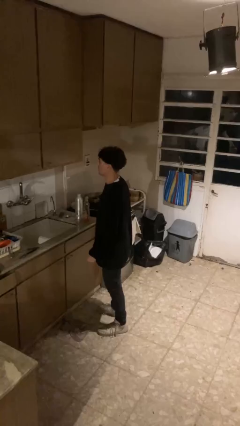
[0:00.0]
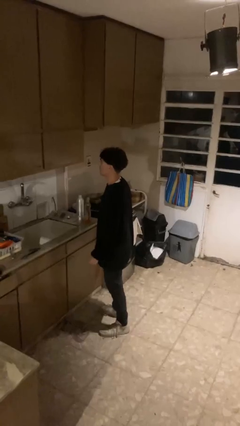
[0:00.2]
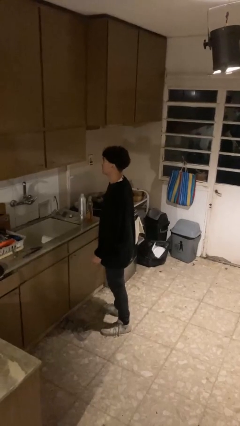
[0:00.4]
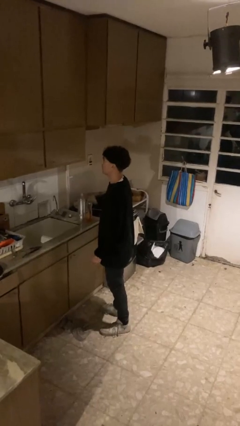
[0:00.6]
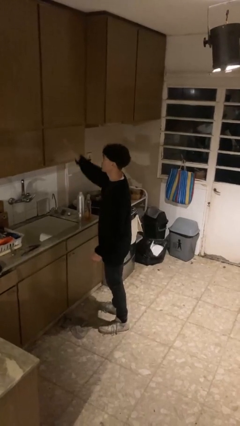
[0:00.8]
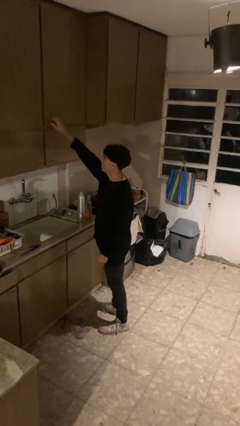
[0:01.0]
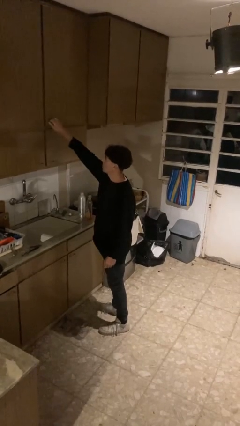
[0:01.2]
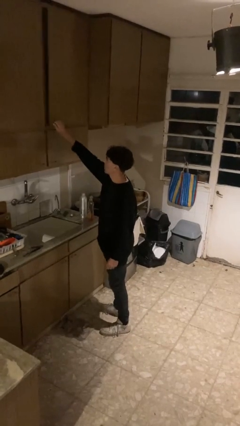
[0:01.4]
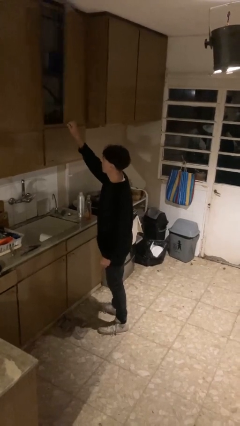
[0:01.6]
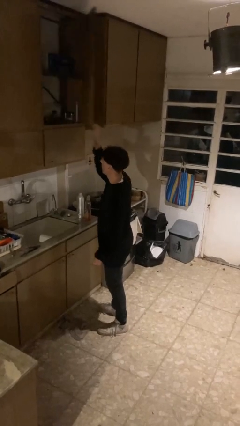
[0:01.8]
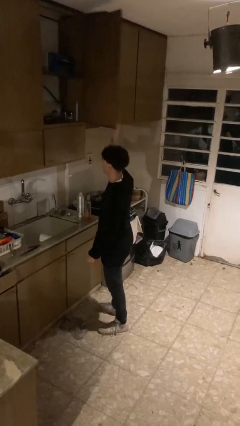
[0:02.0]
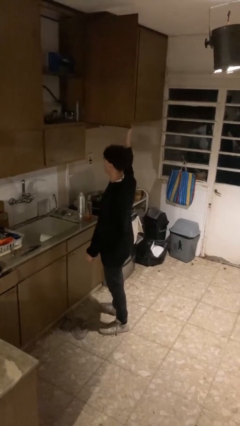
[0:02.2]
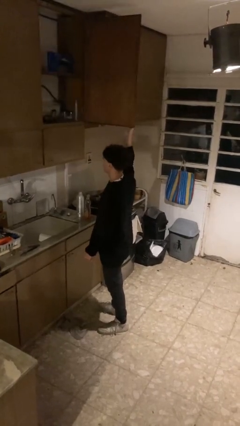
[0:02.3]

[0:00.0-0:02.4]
person closes cabinet

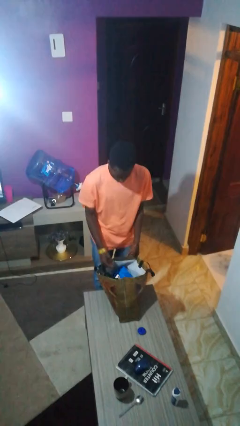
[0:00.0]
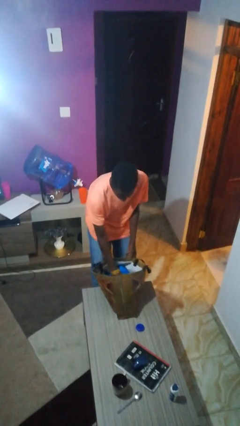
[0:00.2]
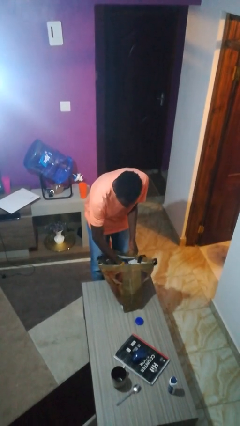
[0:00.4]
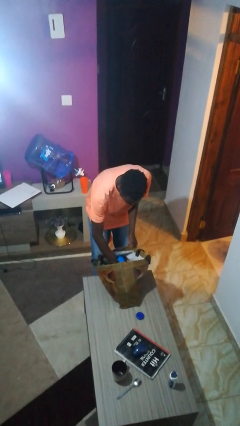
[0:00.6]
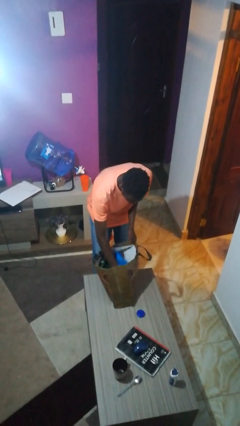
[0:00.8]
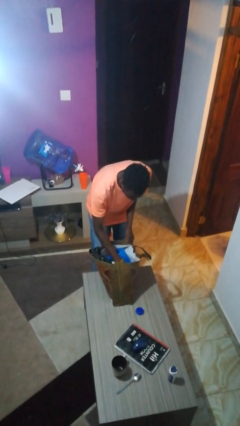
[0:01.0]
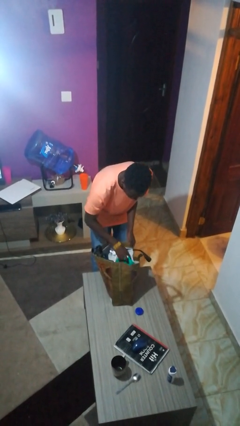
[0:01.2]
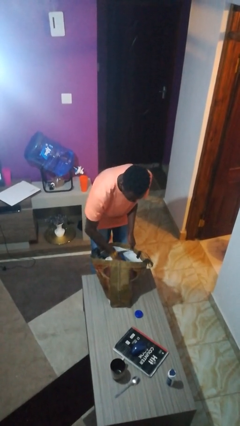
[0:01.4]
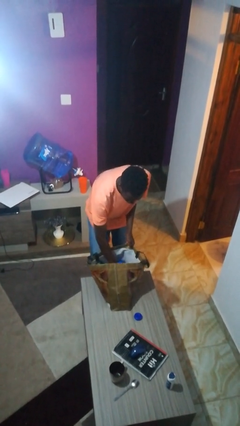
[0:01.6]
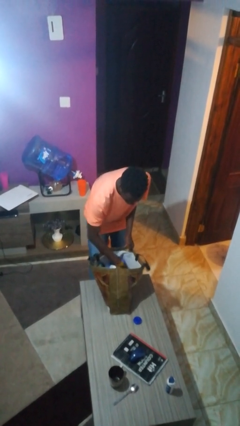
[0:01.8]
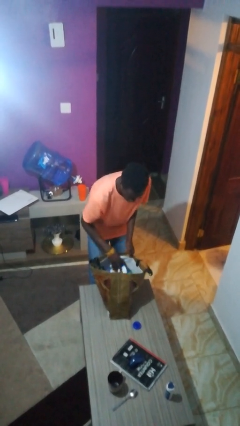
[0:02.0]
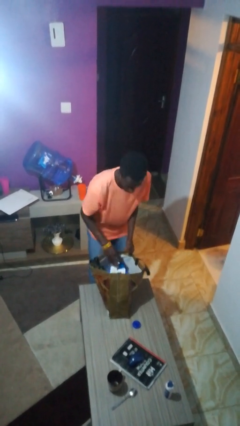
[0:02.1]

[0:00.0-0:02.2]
person searches in bag

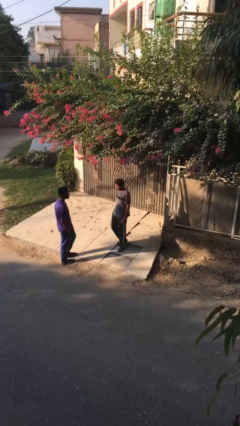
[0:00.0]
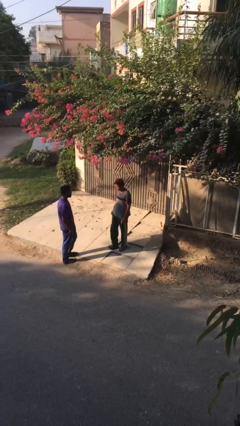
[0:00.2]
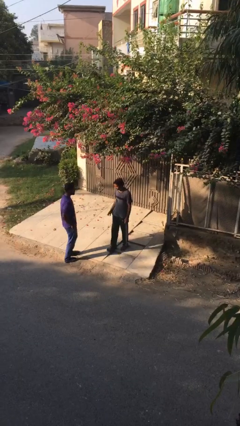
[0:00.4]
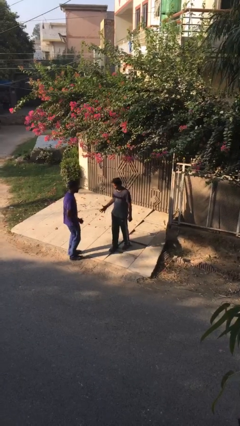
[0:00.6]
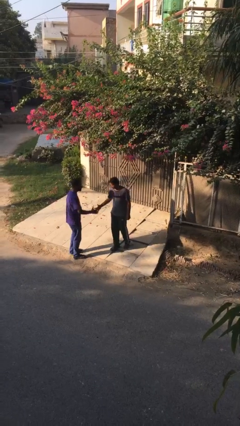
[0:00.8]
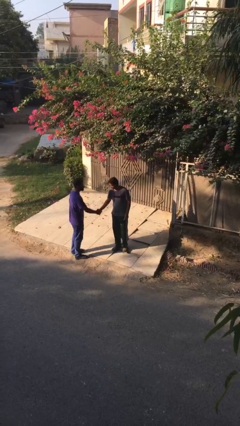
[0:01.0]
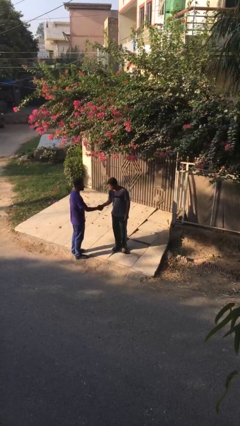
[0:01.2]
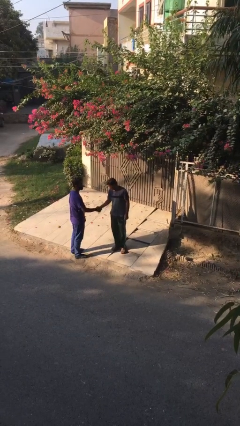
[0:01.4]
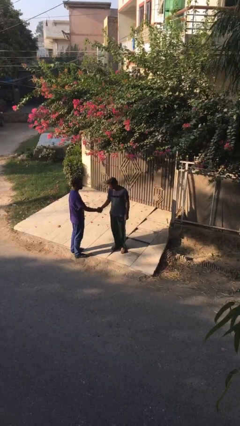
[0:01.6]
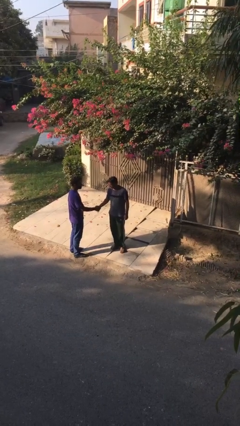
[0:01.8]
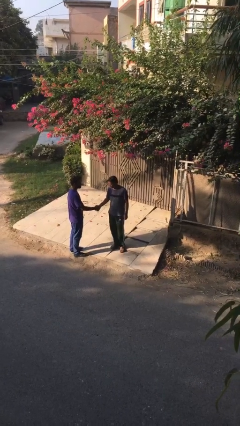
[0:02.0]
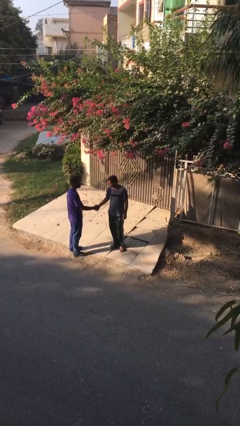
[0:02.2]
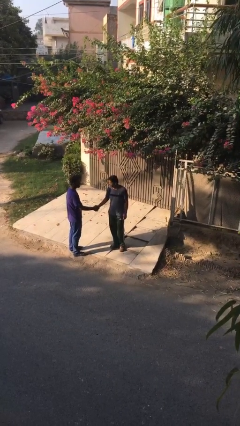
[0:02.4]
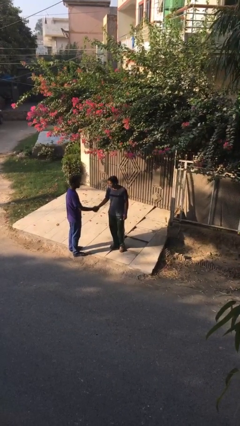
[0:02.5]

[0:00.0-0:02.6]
person shakes hand

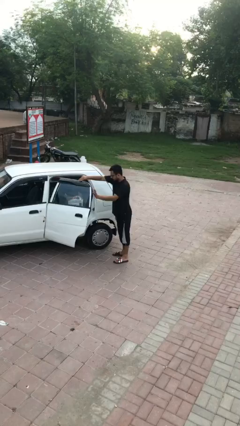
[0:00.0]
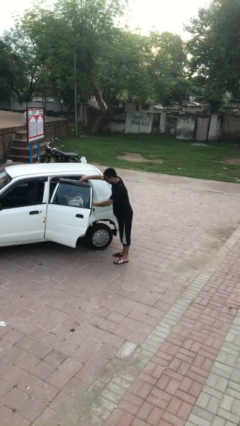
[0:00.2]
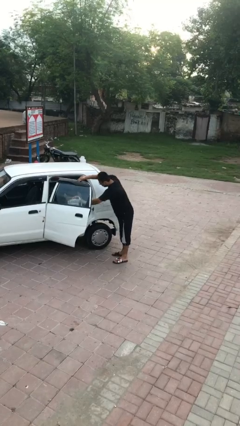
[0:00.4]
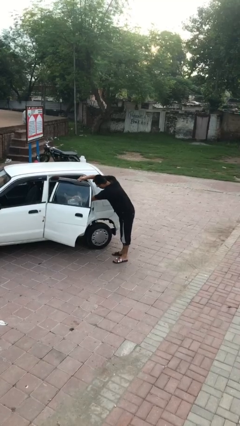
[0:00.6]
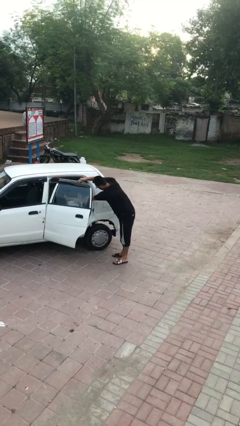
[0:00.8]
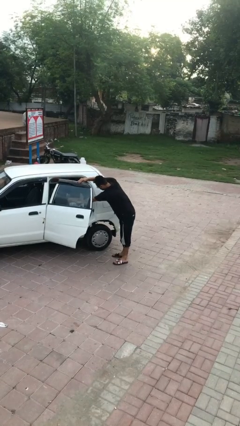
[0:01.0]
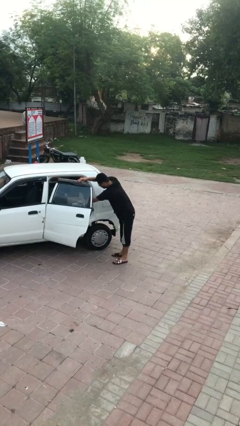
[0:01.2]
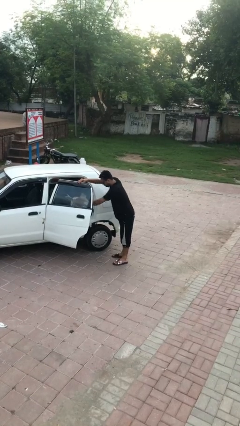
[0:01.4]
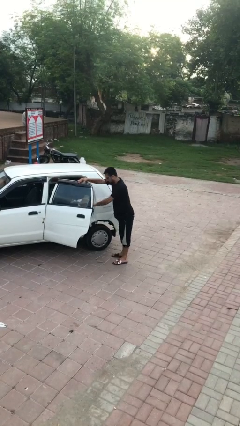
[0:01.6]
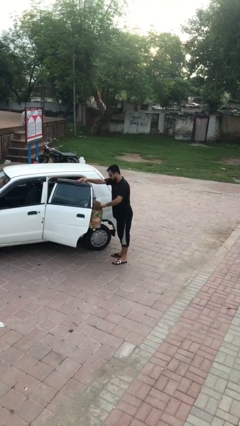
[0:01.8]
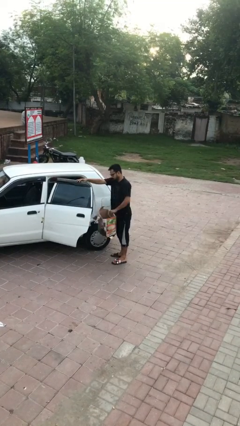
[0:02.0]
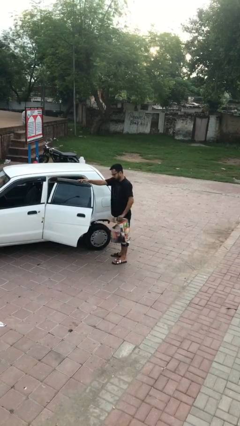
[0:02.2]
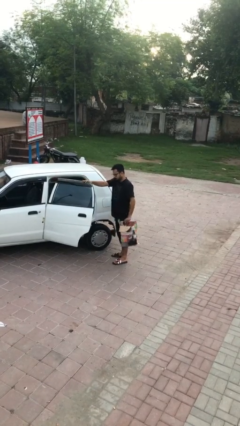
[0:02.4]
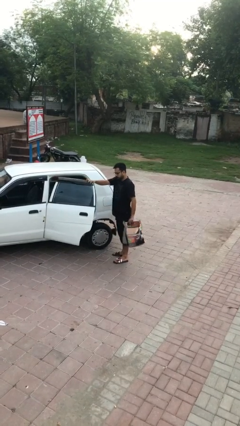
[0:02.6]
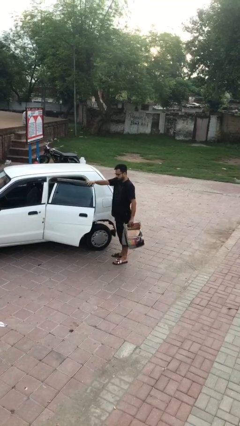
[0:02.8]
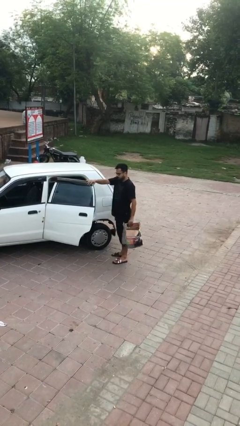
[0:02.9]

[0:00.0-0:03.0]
person unloads car

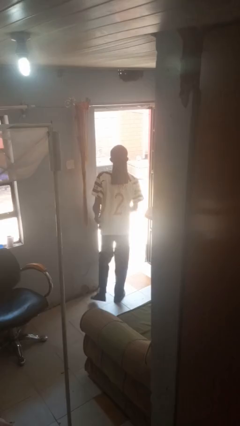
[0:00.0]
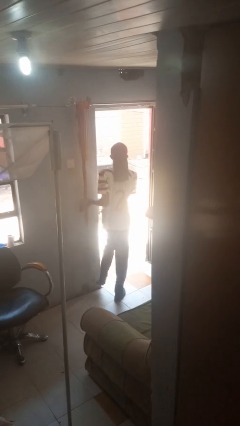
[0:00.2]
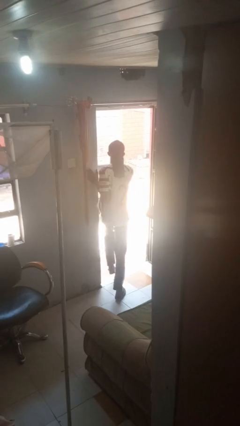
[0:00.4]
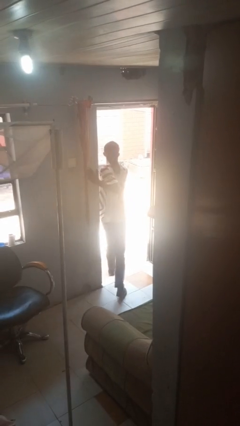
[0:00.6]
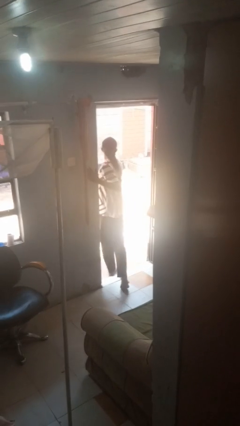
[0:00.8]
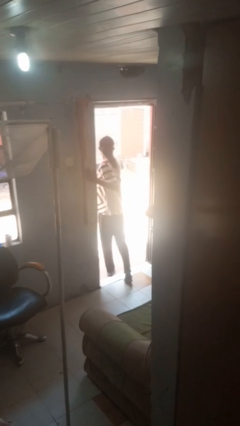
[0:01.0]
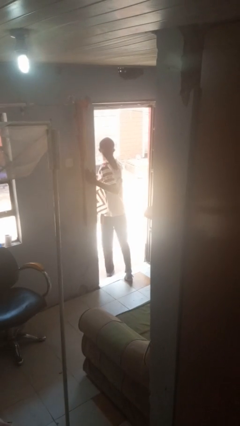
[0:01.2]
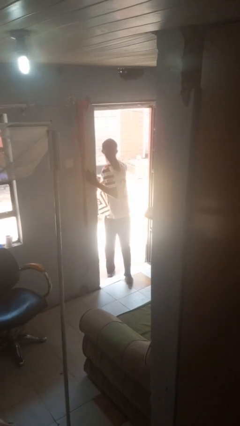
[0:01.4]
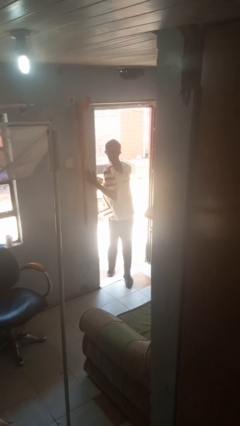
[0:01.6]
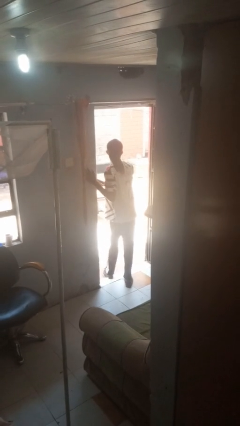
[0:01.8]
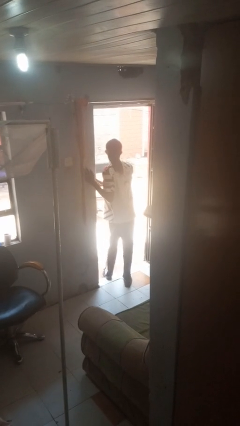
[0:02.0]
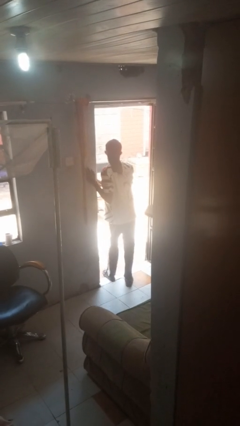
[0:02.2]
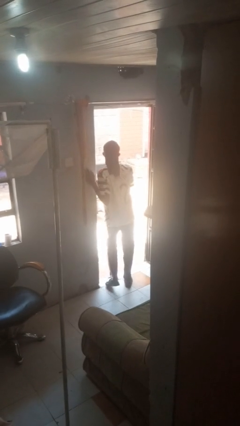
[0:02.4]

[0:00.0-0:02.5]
person bumps into wall

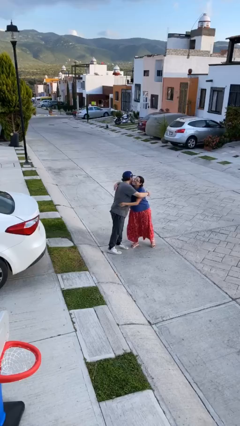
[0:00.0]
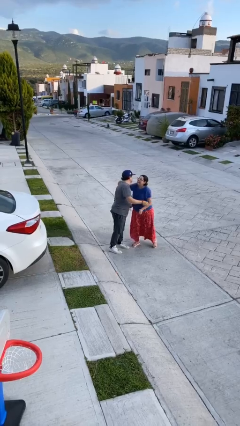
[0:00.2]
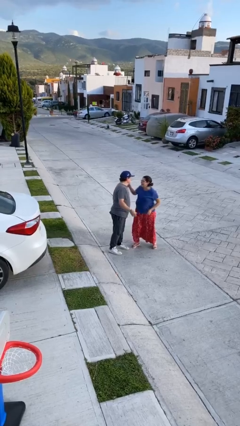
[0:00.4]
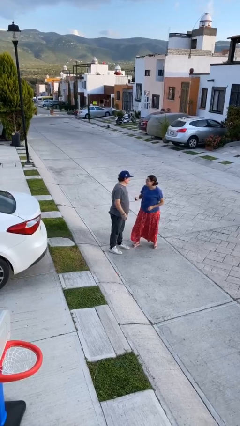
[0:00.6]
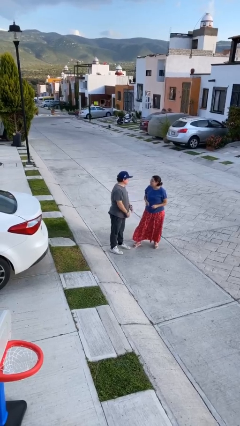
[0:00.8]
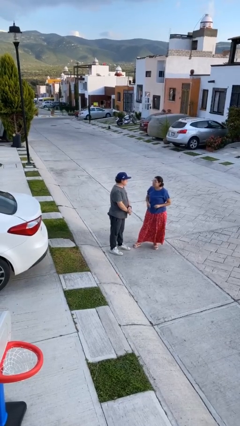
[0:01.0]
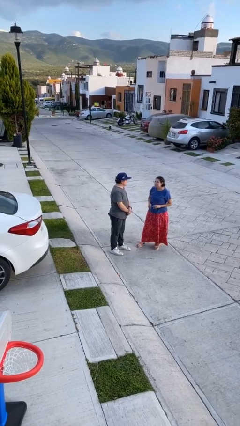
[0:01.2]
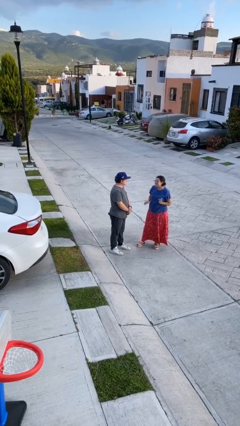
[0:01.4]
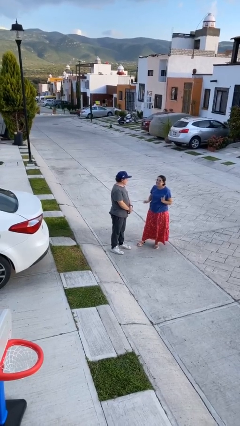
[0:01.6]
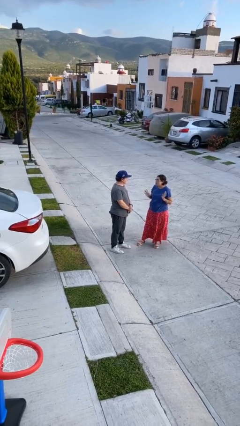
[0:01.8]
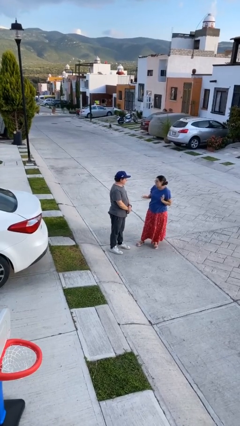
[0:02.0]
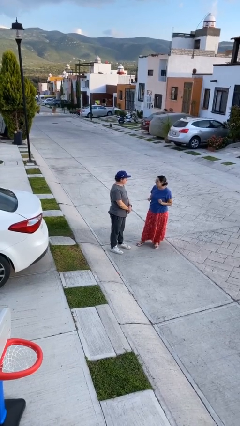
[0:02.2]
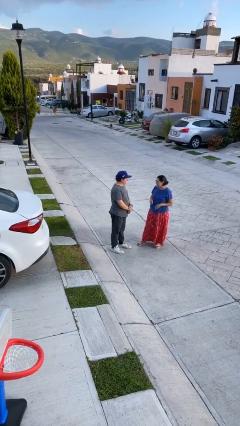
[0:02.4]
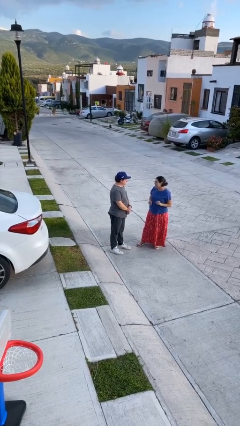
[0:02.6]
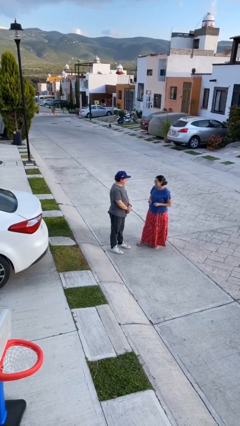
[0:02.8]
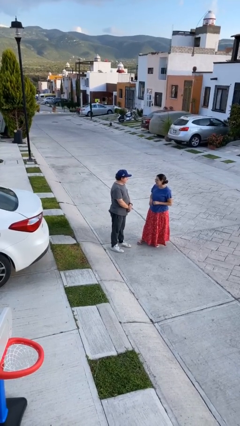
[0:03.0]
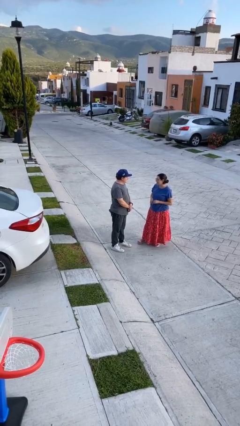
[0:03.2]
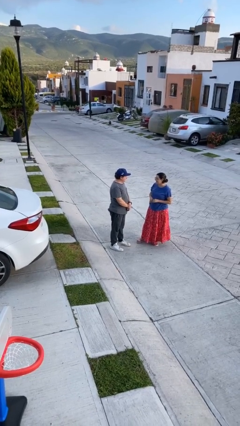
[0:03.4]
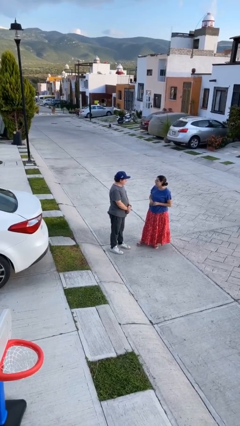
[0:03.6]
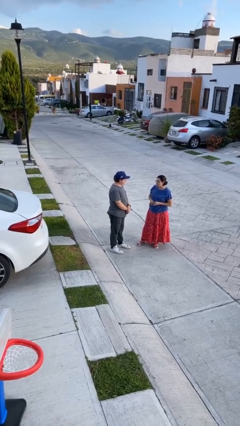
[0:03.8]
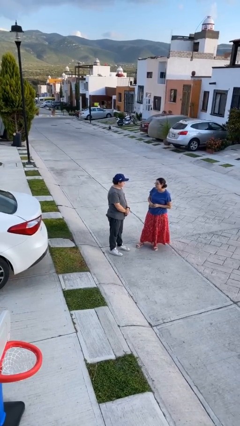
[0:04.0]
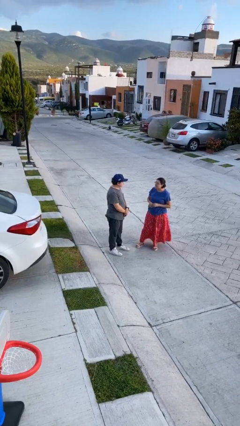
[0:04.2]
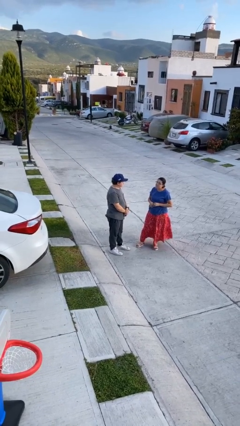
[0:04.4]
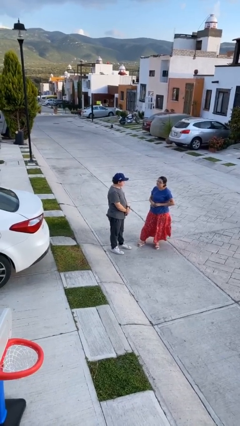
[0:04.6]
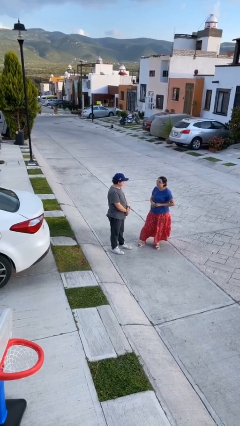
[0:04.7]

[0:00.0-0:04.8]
person talks to person
